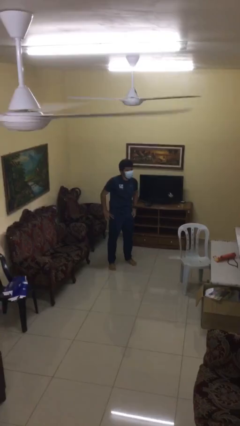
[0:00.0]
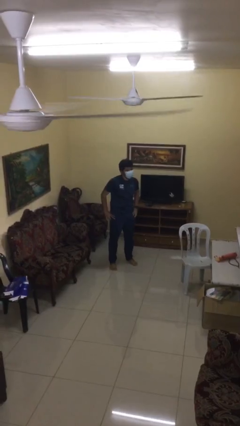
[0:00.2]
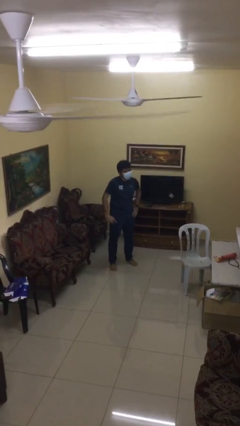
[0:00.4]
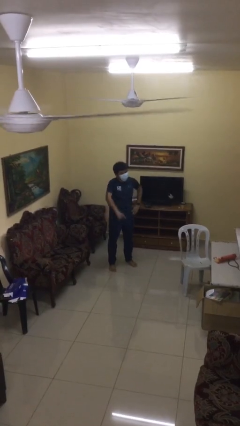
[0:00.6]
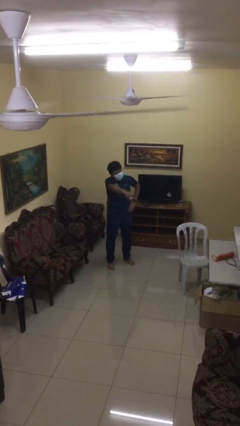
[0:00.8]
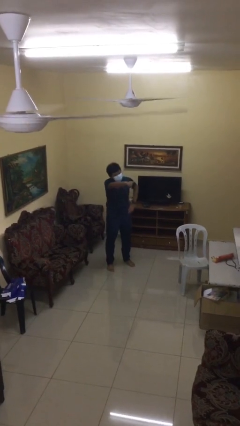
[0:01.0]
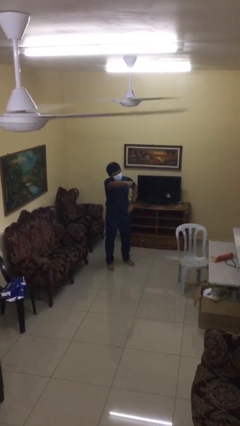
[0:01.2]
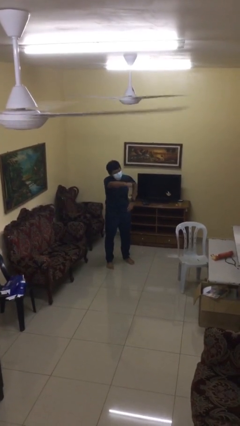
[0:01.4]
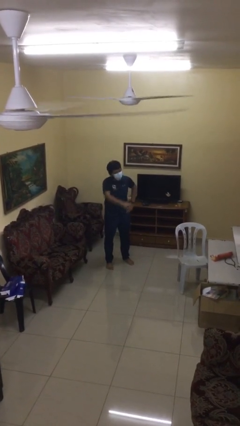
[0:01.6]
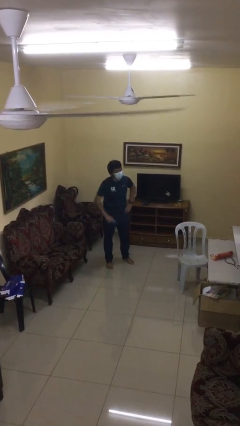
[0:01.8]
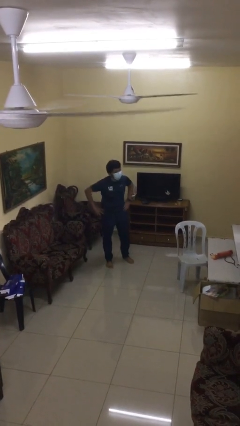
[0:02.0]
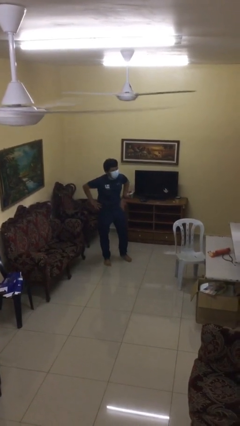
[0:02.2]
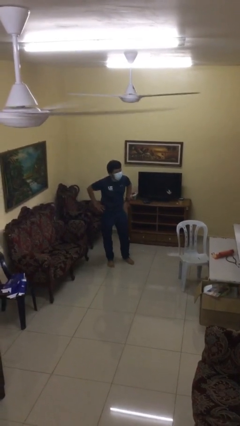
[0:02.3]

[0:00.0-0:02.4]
person points at person

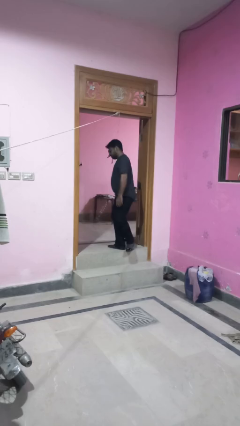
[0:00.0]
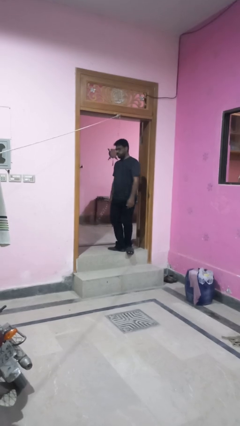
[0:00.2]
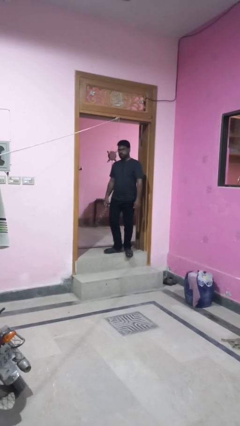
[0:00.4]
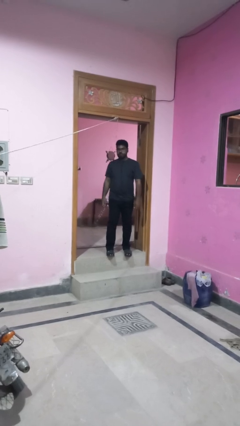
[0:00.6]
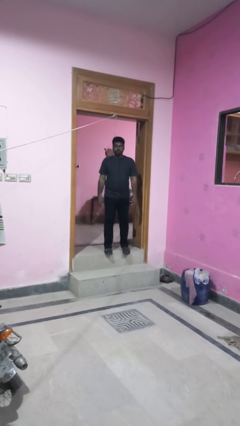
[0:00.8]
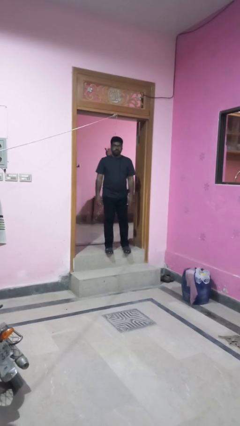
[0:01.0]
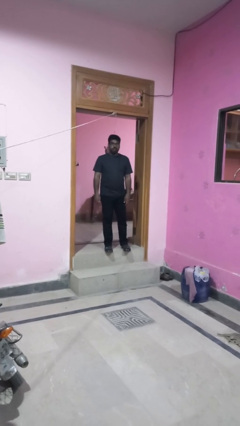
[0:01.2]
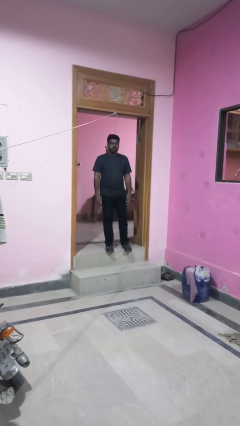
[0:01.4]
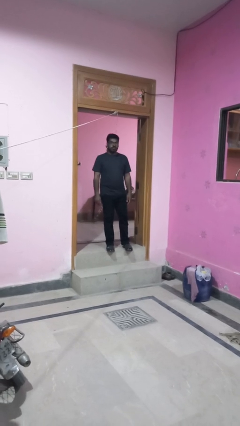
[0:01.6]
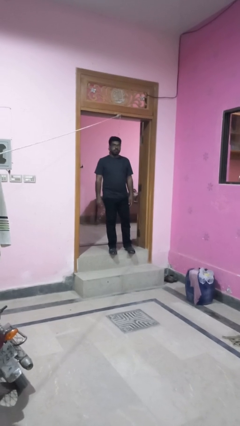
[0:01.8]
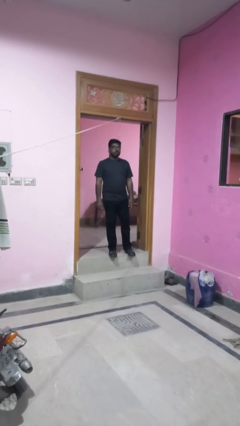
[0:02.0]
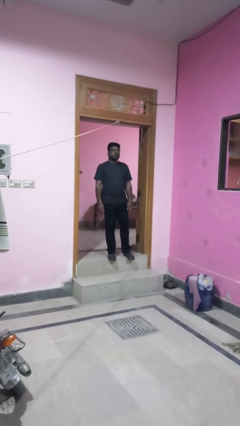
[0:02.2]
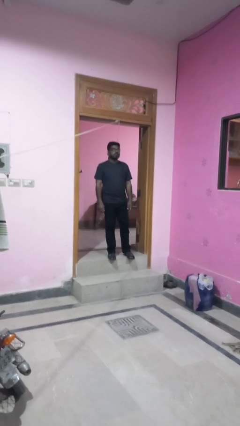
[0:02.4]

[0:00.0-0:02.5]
person takes off necklace

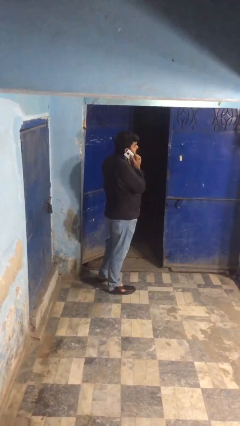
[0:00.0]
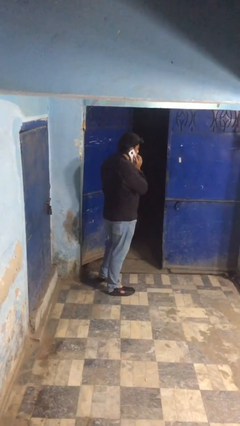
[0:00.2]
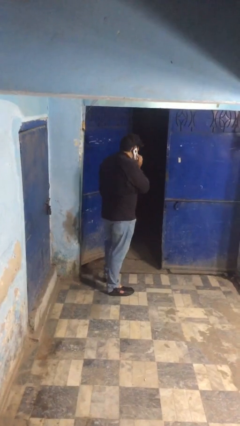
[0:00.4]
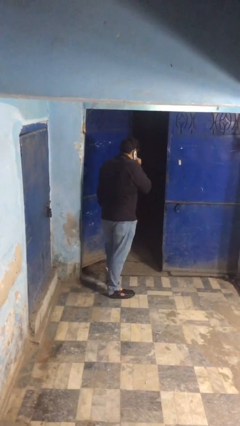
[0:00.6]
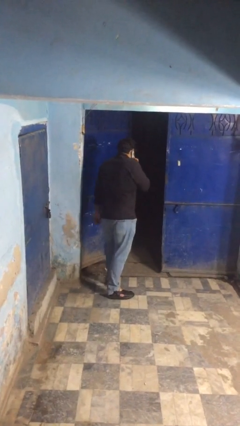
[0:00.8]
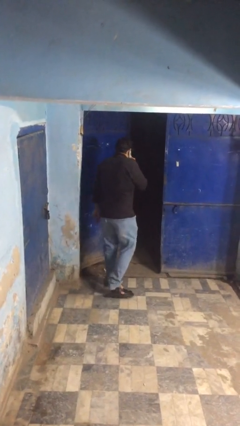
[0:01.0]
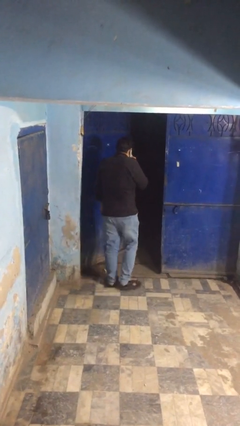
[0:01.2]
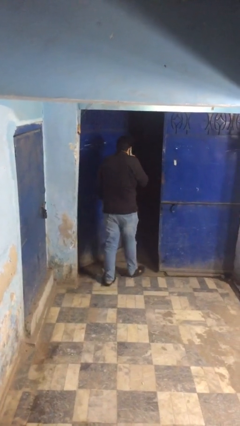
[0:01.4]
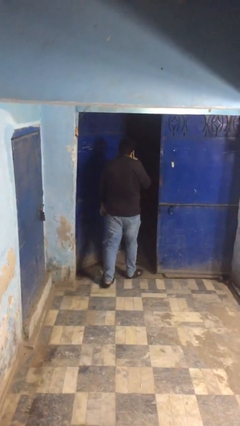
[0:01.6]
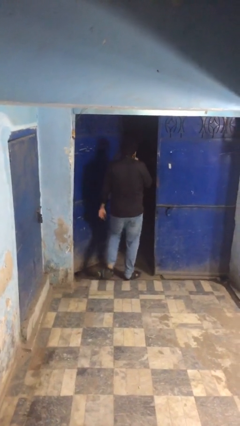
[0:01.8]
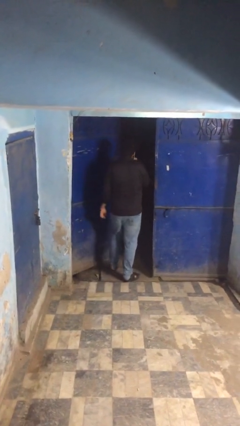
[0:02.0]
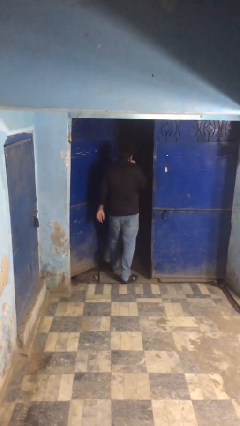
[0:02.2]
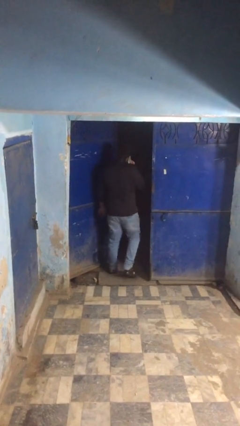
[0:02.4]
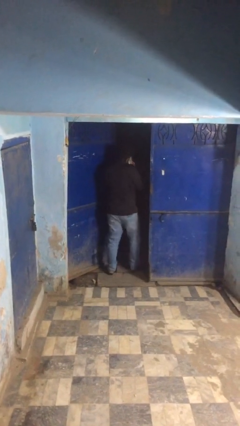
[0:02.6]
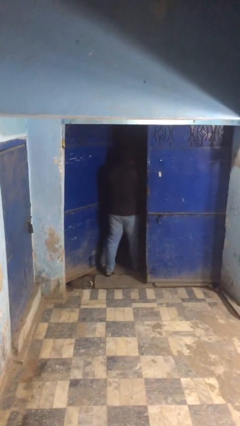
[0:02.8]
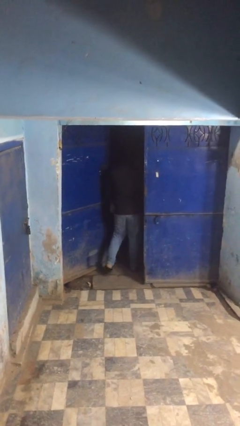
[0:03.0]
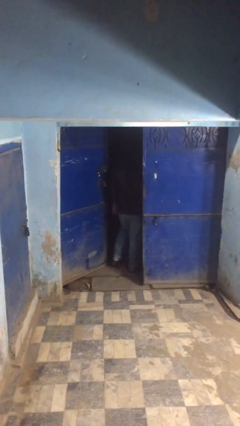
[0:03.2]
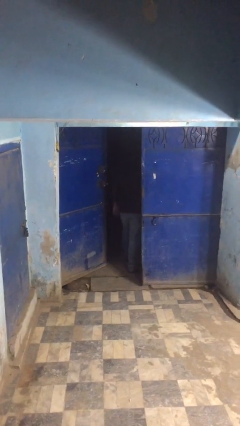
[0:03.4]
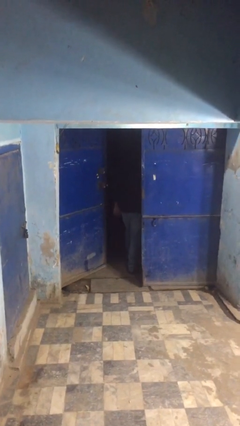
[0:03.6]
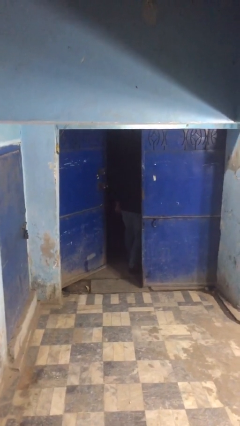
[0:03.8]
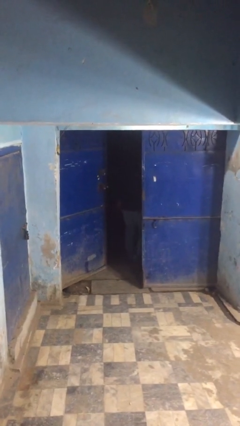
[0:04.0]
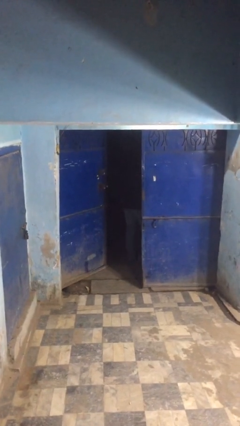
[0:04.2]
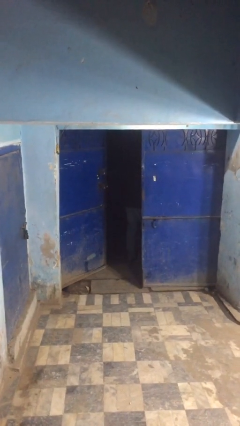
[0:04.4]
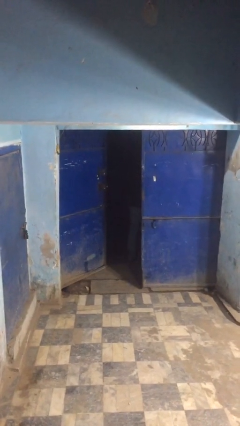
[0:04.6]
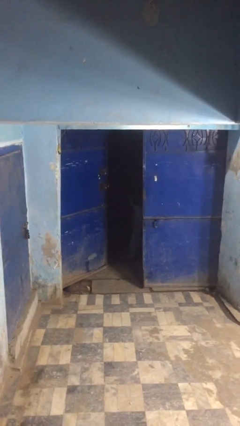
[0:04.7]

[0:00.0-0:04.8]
person exits scene through structure

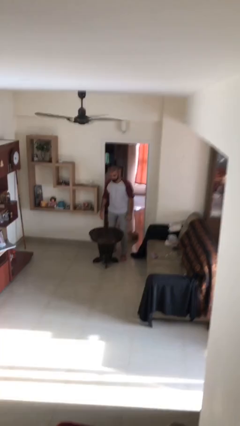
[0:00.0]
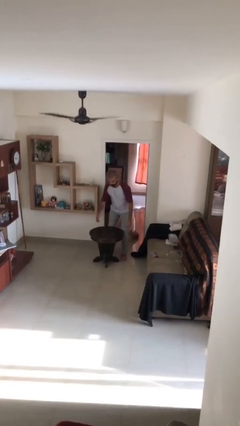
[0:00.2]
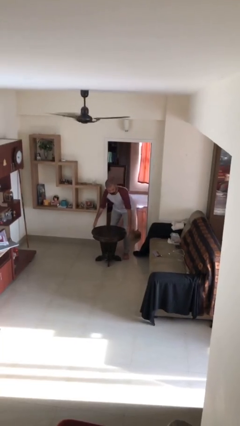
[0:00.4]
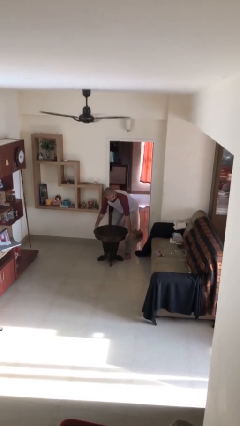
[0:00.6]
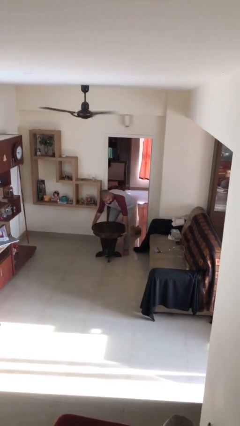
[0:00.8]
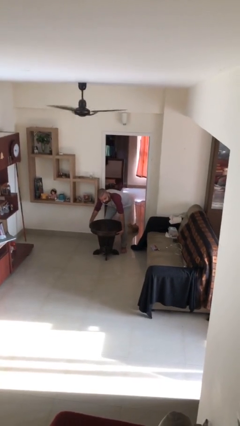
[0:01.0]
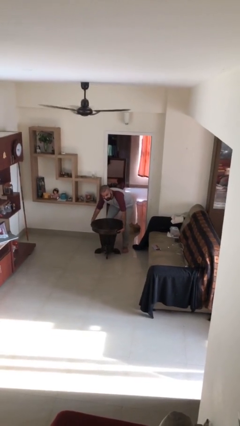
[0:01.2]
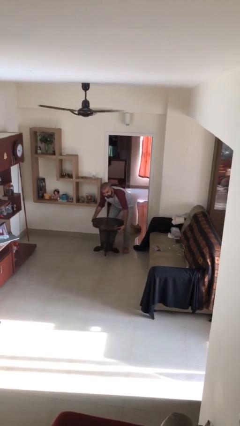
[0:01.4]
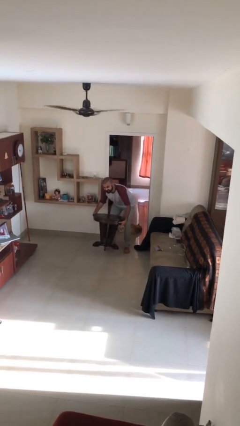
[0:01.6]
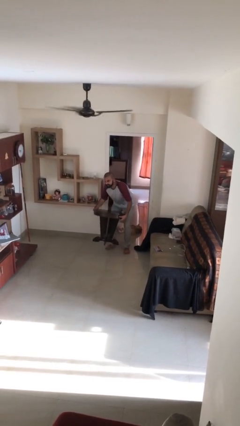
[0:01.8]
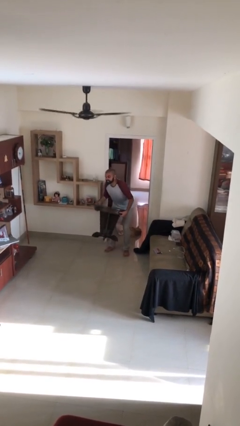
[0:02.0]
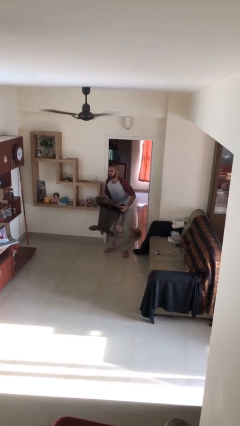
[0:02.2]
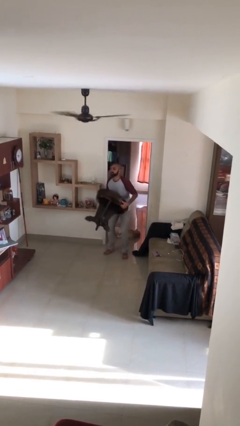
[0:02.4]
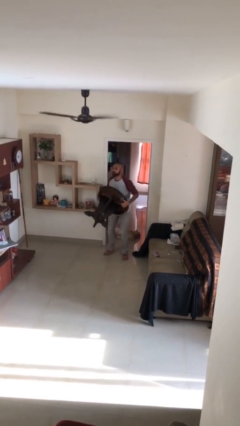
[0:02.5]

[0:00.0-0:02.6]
person picks up object from floor

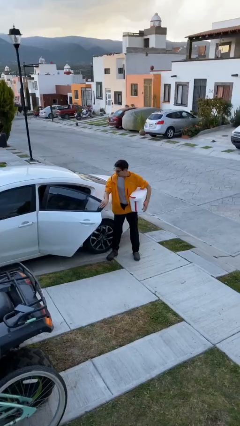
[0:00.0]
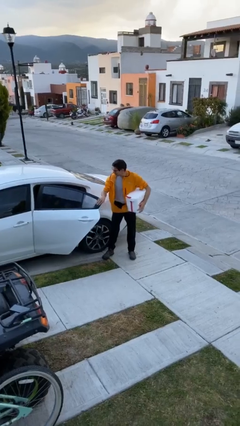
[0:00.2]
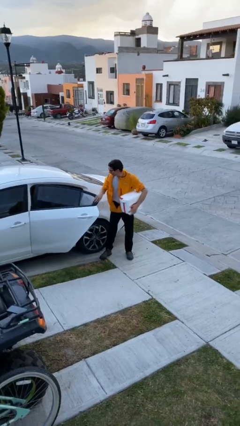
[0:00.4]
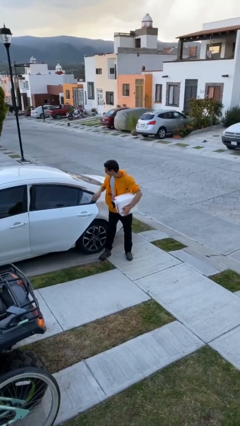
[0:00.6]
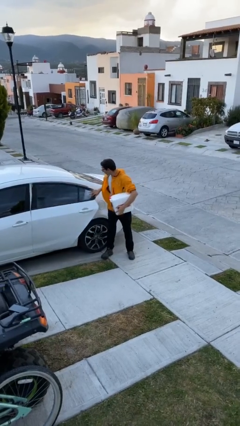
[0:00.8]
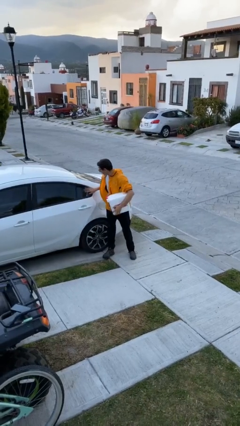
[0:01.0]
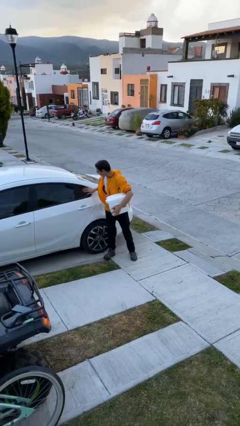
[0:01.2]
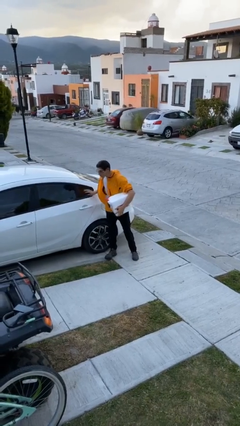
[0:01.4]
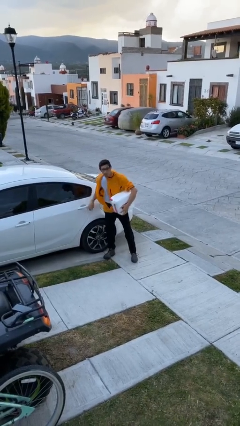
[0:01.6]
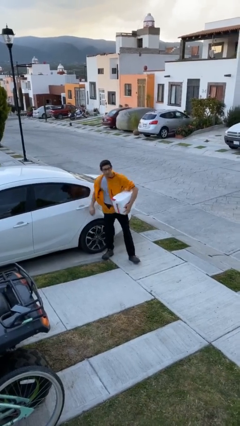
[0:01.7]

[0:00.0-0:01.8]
person closes car door

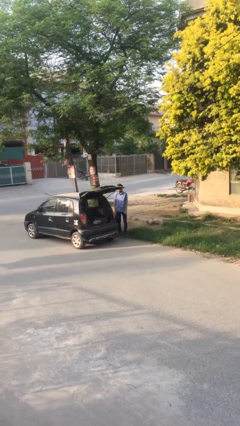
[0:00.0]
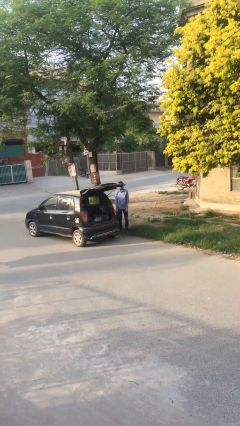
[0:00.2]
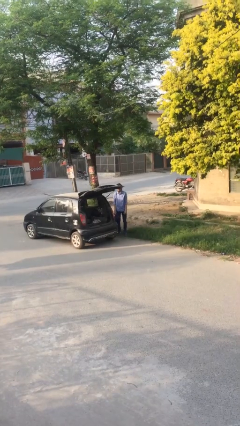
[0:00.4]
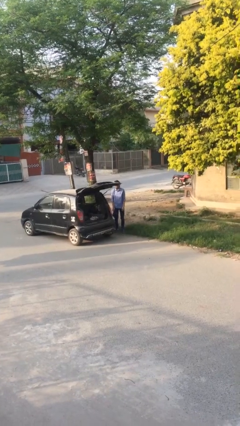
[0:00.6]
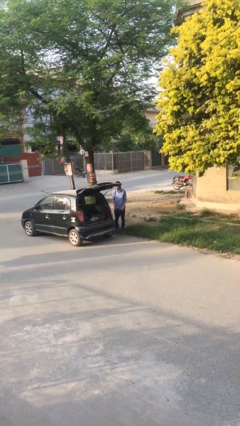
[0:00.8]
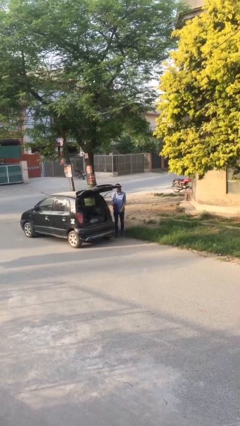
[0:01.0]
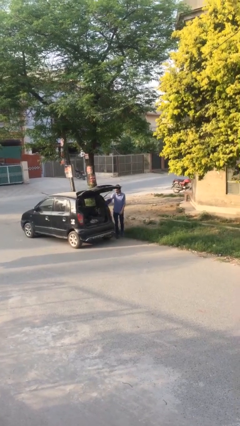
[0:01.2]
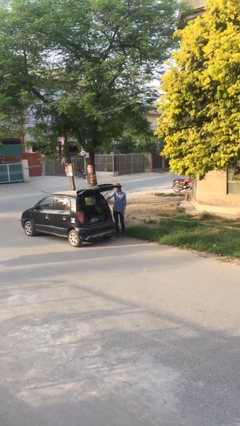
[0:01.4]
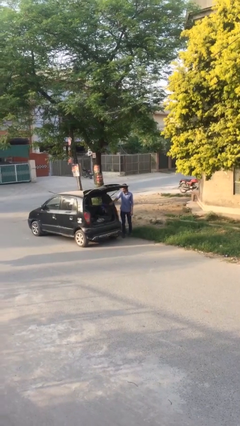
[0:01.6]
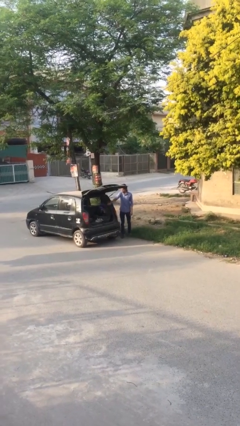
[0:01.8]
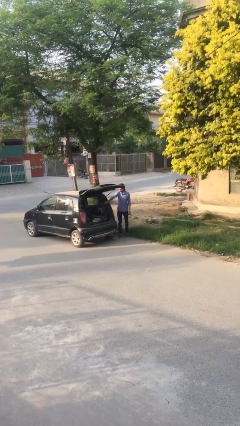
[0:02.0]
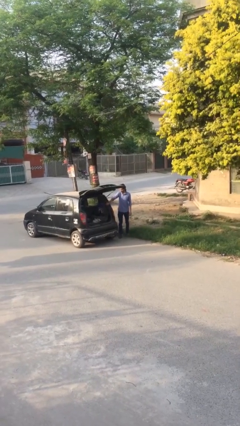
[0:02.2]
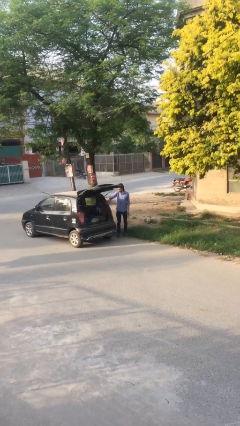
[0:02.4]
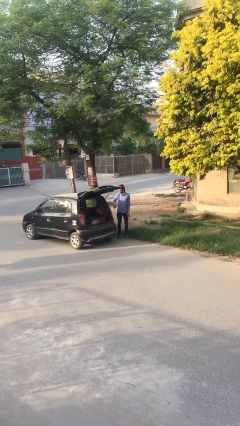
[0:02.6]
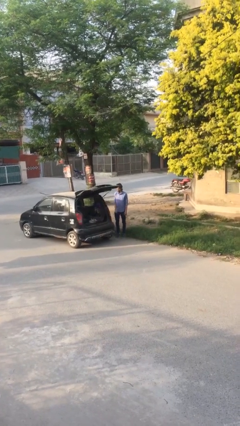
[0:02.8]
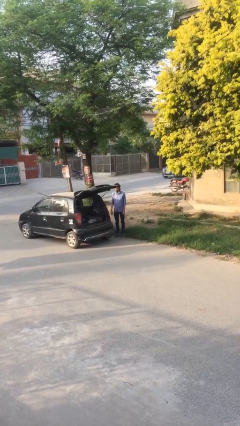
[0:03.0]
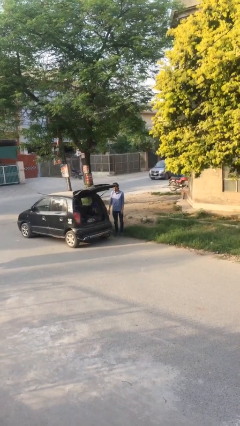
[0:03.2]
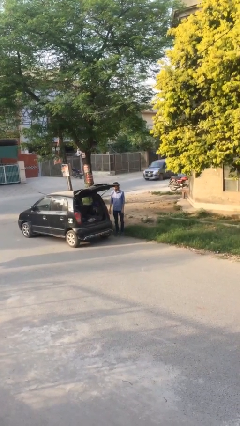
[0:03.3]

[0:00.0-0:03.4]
person loads car
